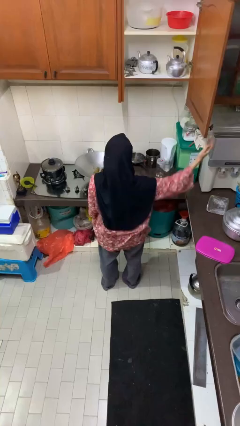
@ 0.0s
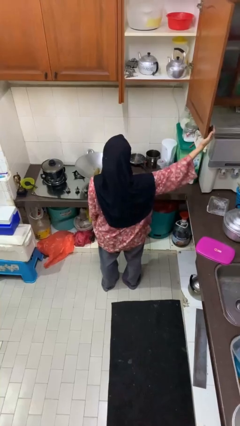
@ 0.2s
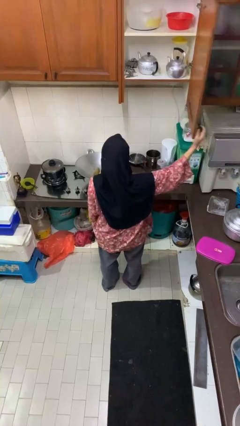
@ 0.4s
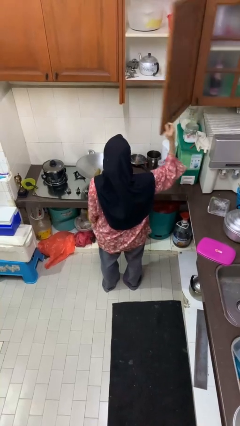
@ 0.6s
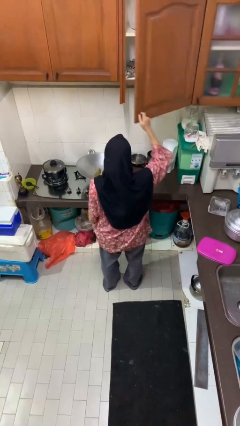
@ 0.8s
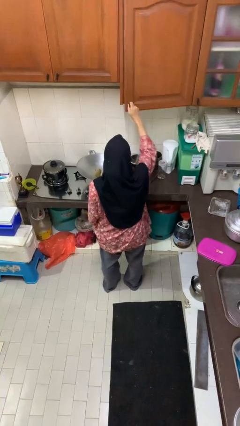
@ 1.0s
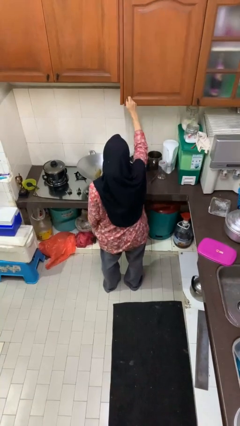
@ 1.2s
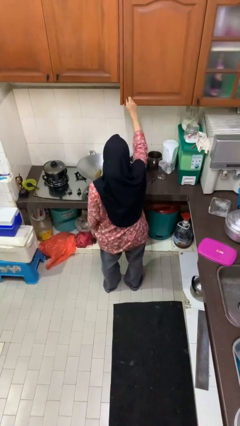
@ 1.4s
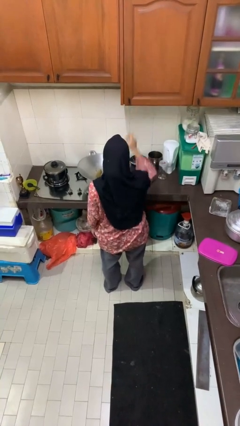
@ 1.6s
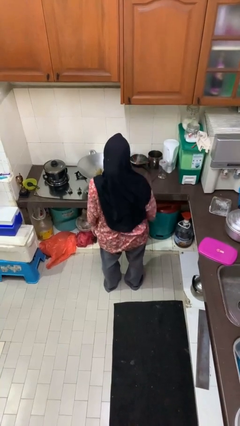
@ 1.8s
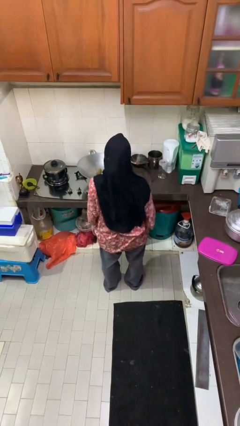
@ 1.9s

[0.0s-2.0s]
person closes cabinet

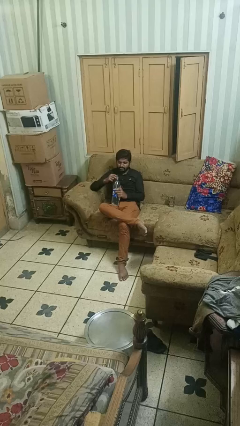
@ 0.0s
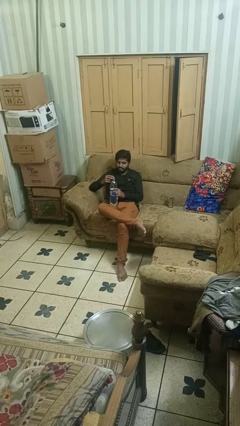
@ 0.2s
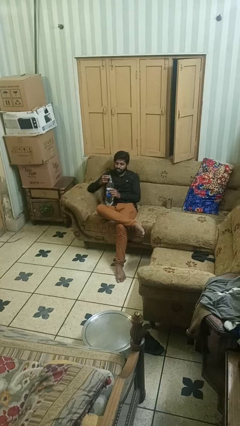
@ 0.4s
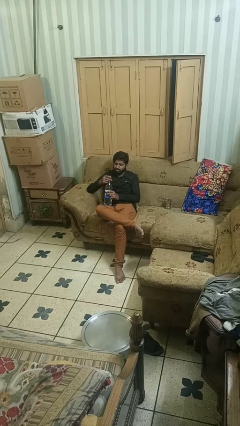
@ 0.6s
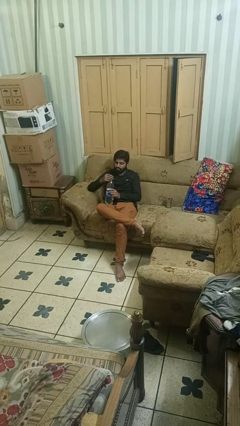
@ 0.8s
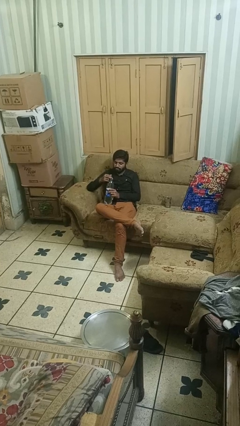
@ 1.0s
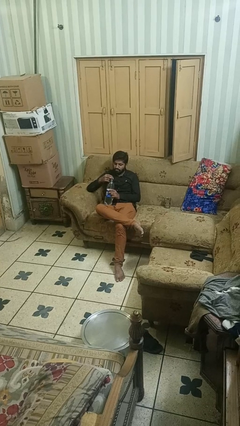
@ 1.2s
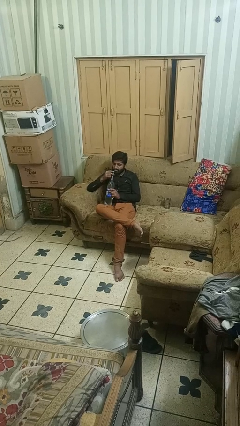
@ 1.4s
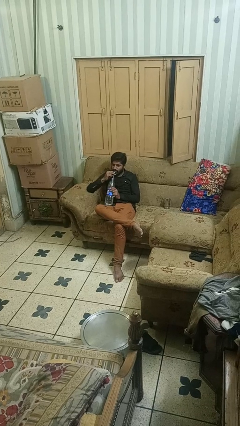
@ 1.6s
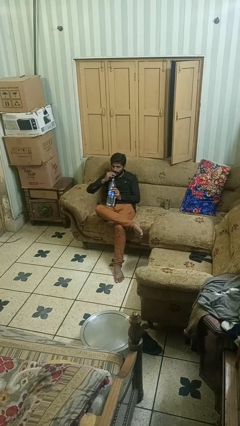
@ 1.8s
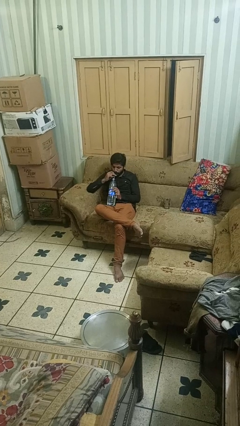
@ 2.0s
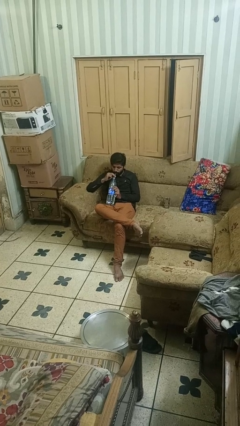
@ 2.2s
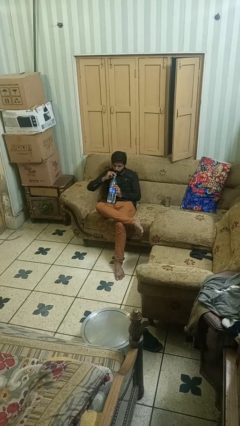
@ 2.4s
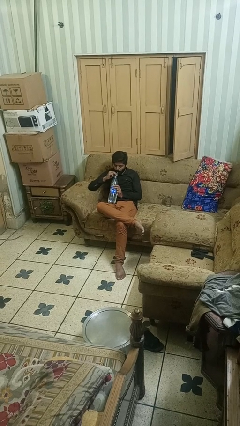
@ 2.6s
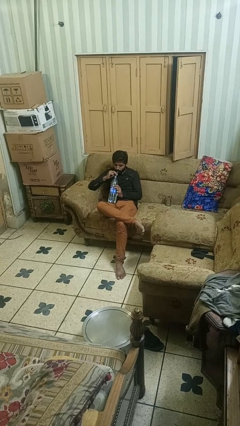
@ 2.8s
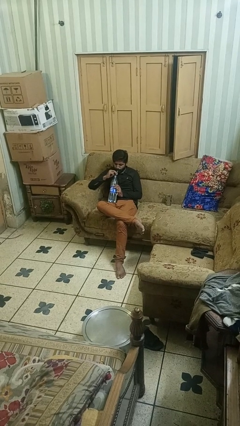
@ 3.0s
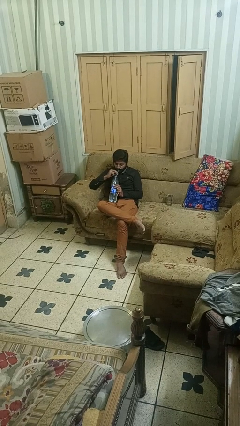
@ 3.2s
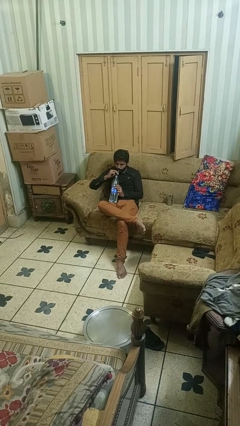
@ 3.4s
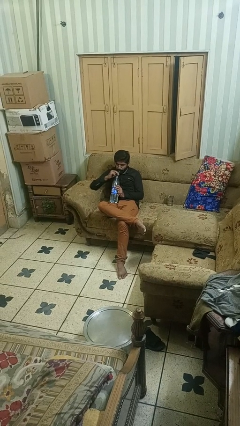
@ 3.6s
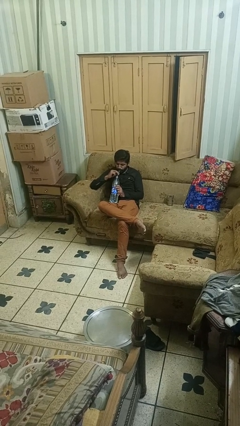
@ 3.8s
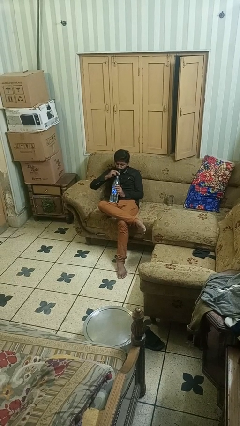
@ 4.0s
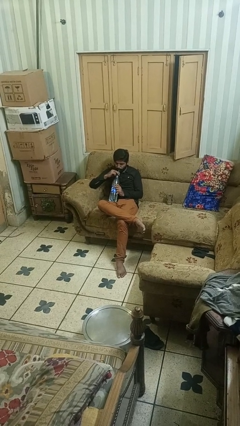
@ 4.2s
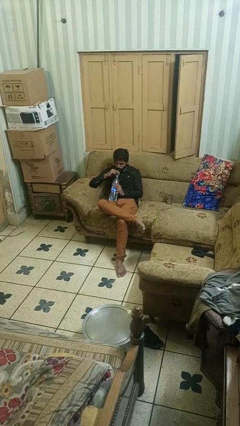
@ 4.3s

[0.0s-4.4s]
person drinks from straw

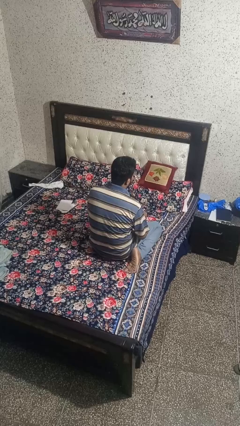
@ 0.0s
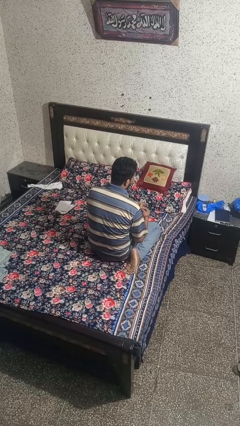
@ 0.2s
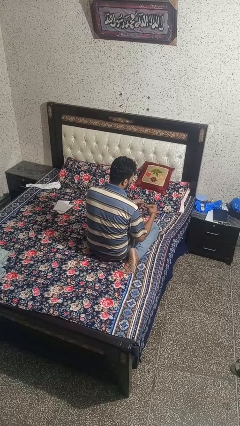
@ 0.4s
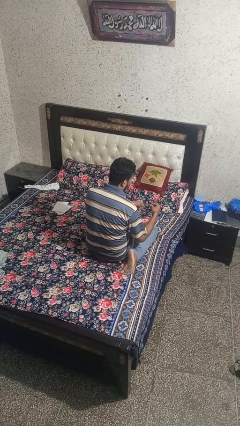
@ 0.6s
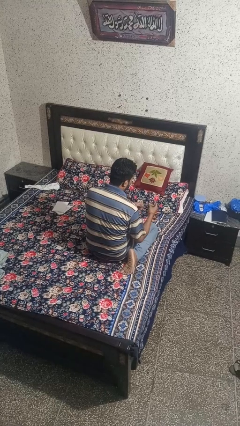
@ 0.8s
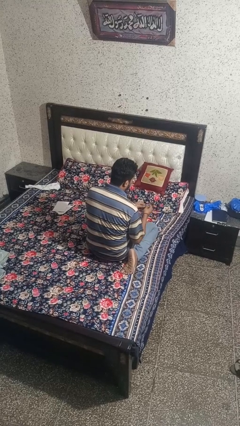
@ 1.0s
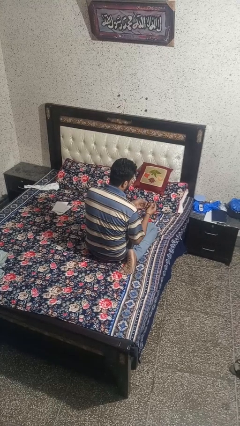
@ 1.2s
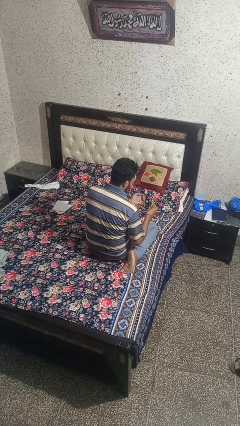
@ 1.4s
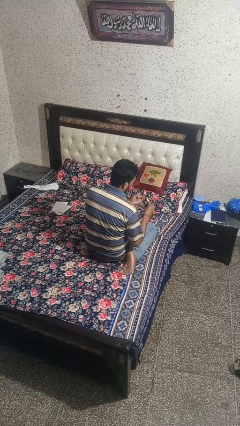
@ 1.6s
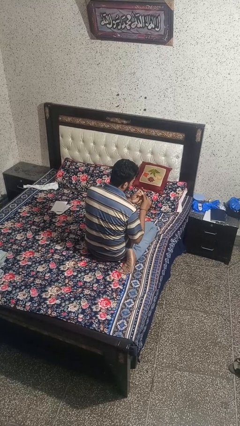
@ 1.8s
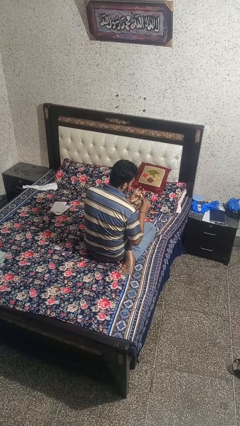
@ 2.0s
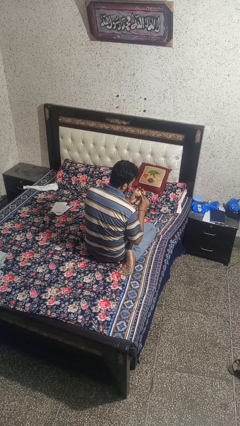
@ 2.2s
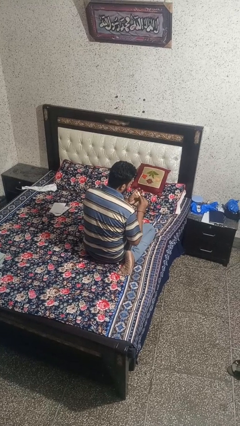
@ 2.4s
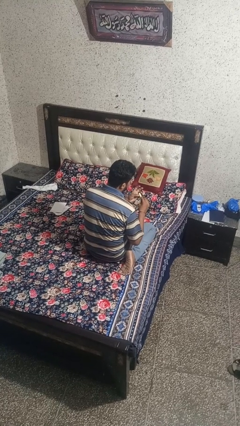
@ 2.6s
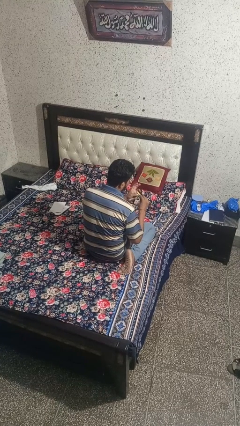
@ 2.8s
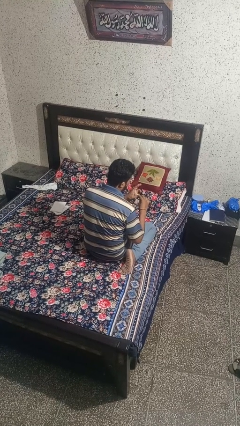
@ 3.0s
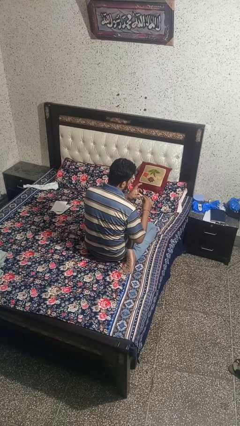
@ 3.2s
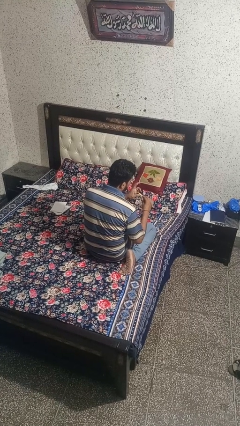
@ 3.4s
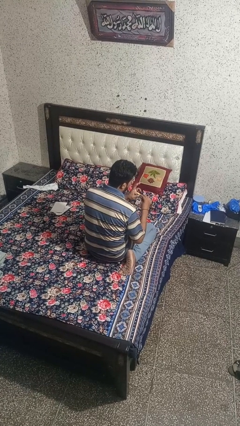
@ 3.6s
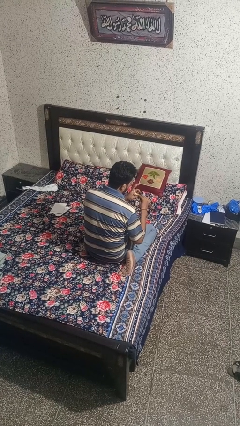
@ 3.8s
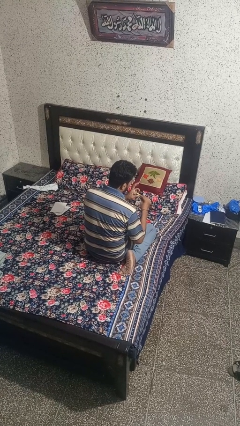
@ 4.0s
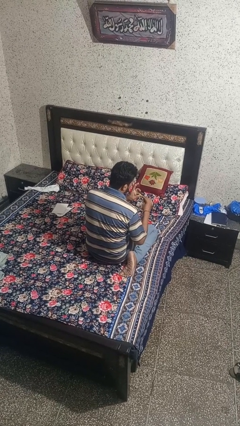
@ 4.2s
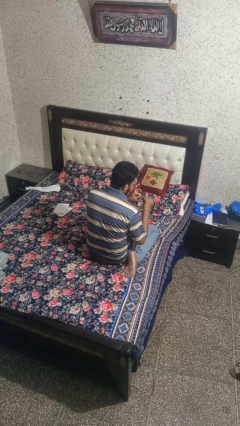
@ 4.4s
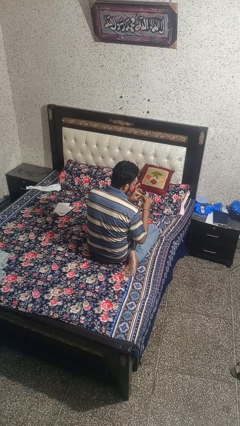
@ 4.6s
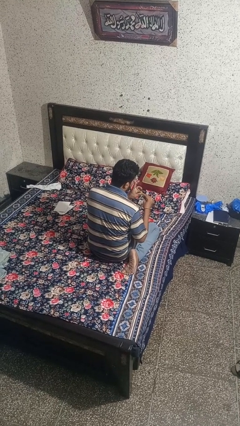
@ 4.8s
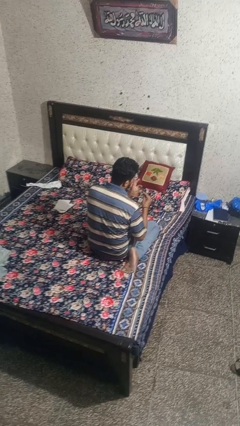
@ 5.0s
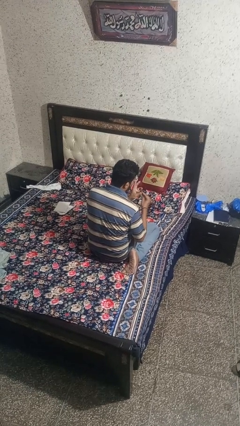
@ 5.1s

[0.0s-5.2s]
person files fingernails

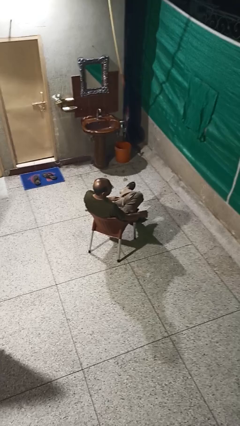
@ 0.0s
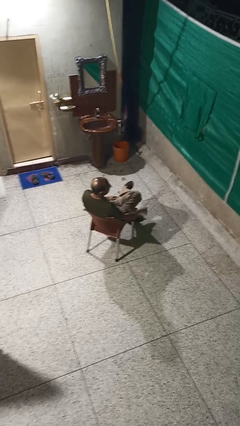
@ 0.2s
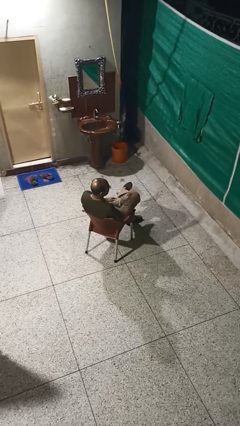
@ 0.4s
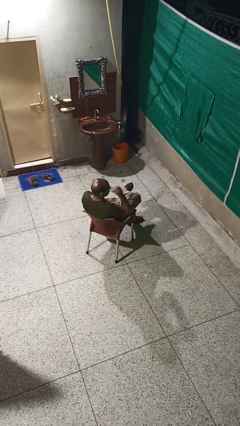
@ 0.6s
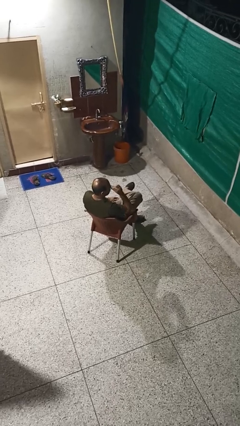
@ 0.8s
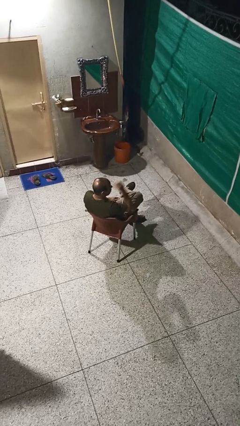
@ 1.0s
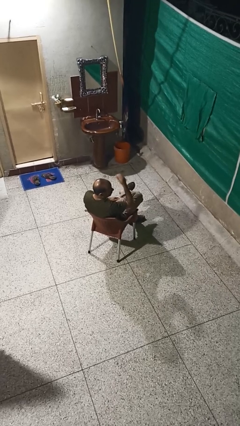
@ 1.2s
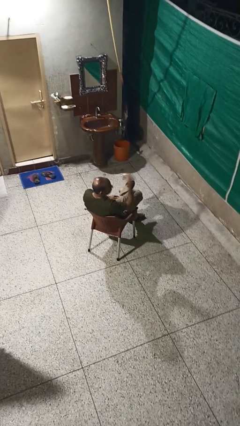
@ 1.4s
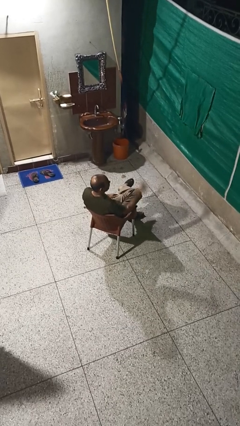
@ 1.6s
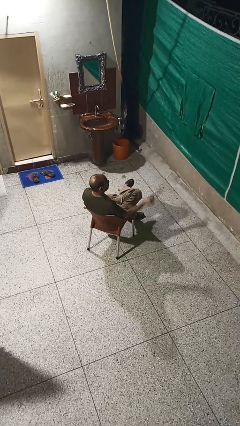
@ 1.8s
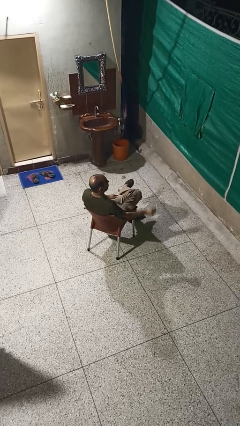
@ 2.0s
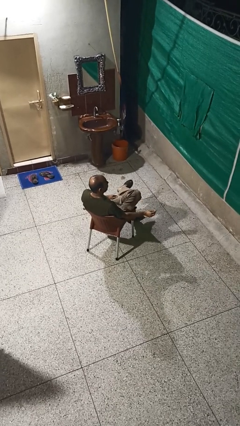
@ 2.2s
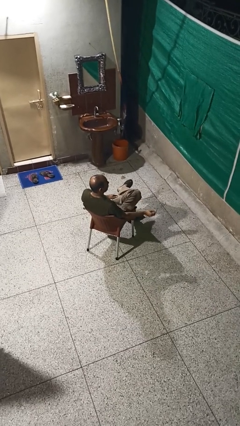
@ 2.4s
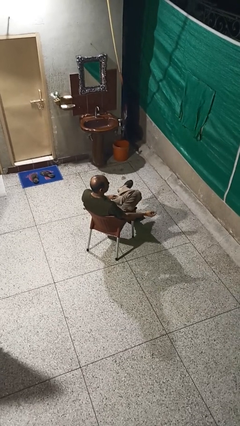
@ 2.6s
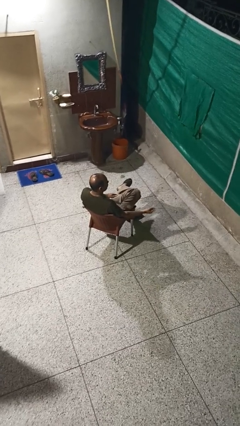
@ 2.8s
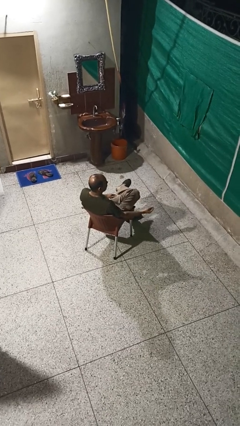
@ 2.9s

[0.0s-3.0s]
person takes off glasses

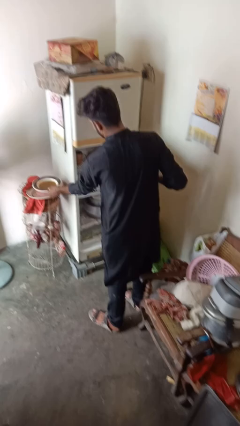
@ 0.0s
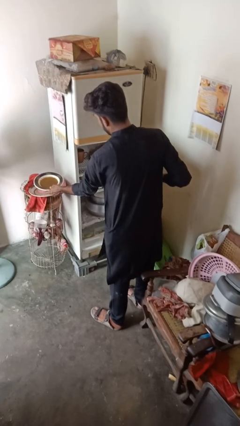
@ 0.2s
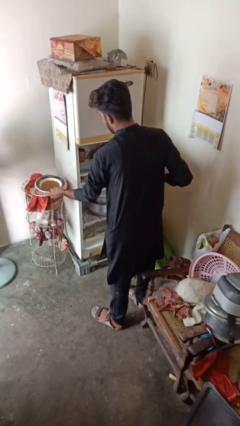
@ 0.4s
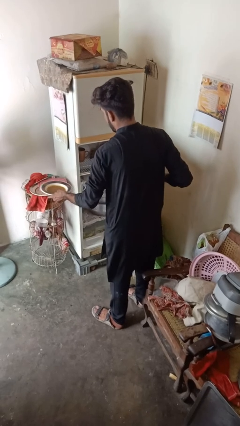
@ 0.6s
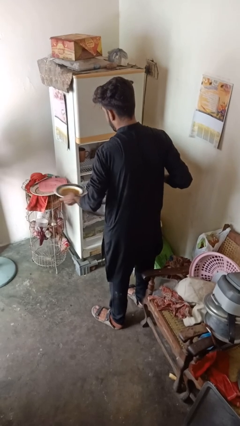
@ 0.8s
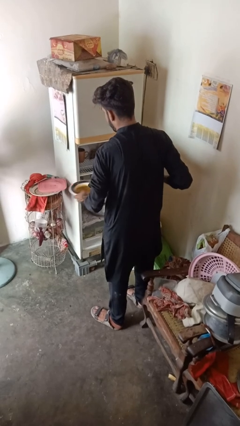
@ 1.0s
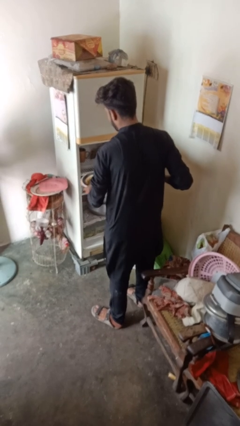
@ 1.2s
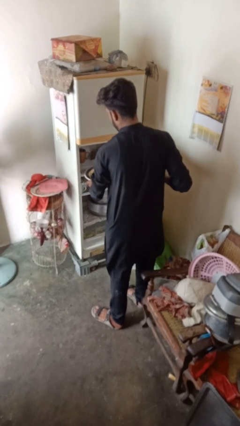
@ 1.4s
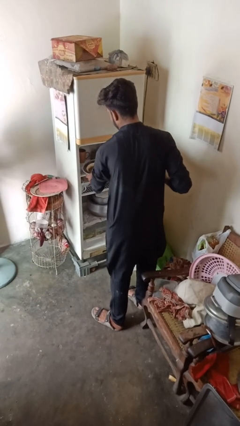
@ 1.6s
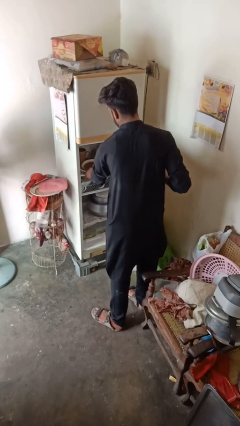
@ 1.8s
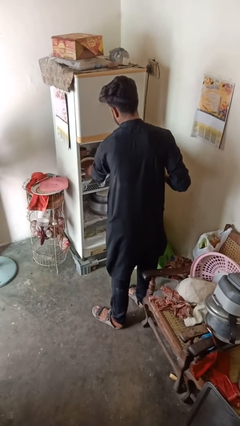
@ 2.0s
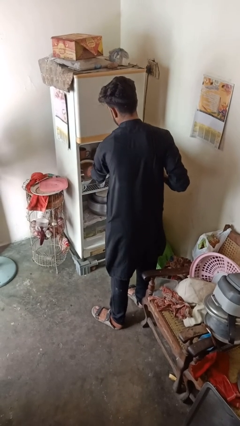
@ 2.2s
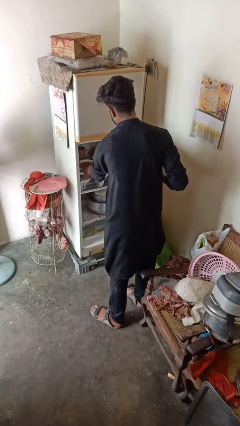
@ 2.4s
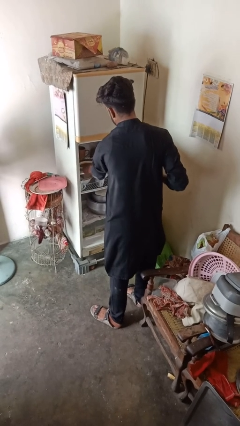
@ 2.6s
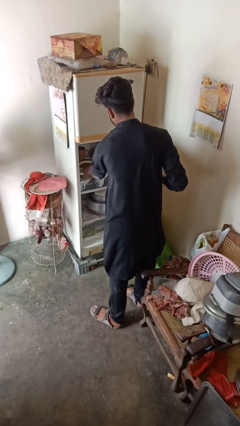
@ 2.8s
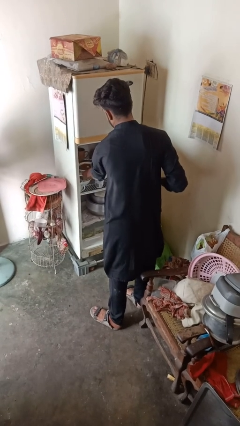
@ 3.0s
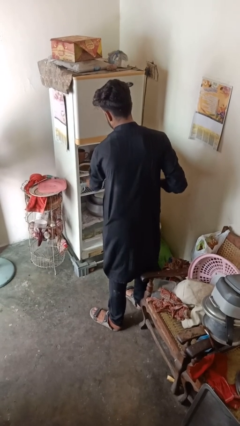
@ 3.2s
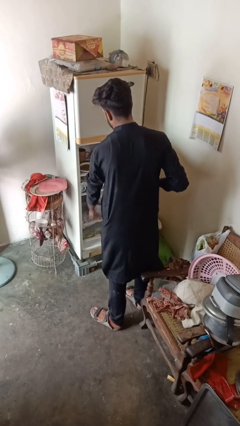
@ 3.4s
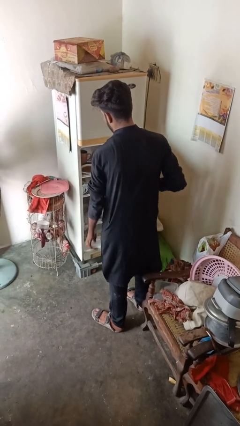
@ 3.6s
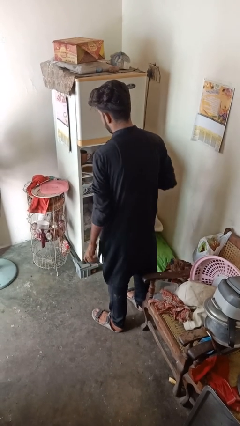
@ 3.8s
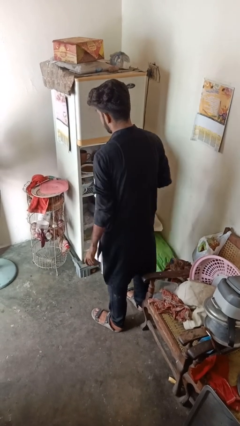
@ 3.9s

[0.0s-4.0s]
person puts object into refrigerator
